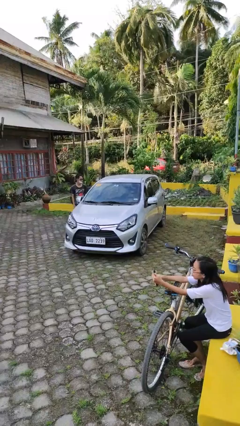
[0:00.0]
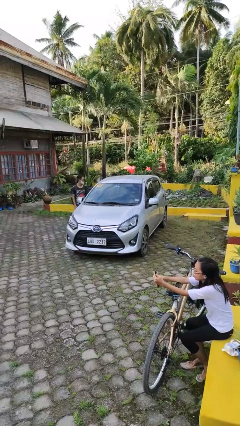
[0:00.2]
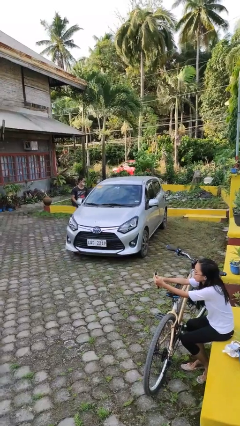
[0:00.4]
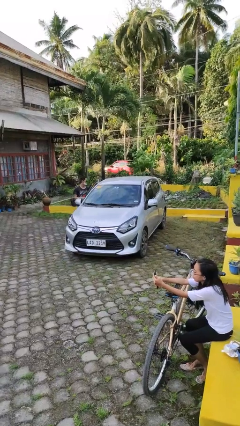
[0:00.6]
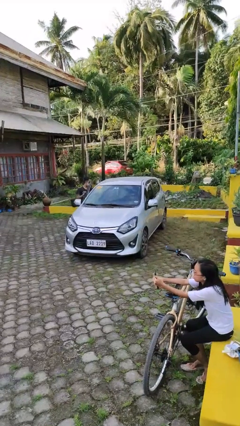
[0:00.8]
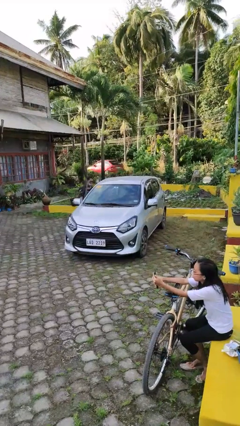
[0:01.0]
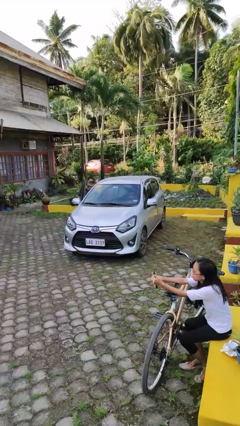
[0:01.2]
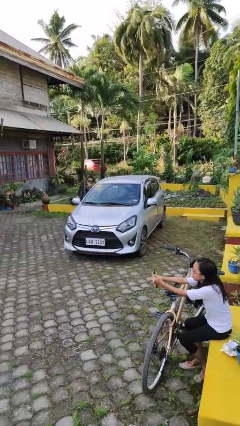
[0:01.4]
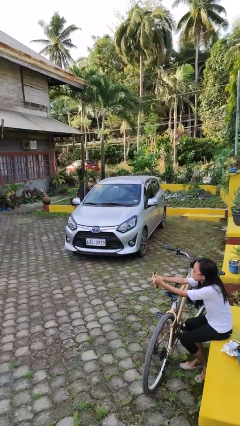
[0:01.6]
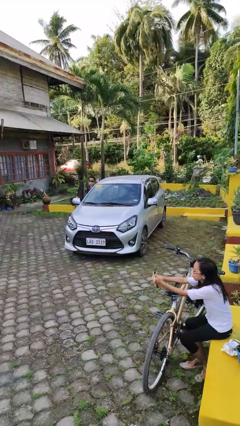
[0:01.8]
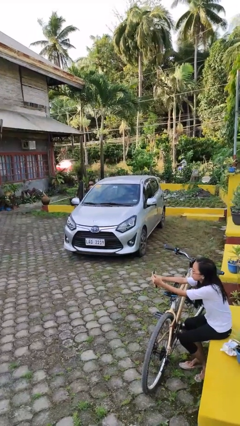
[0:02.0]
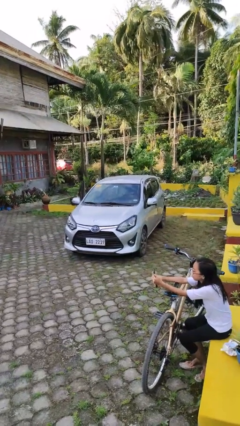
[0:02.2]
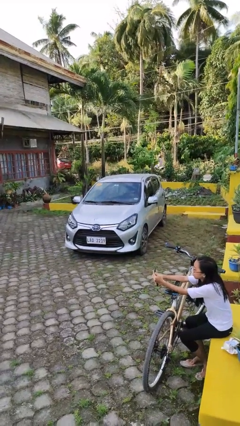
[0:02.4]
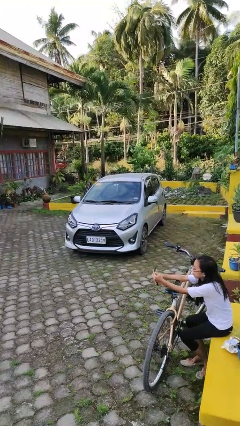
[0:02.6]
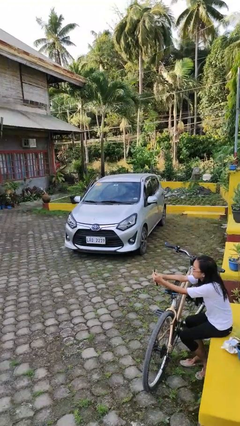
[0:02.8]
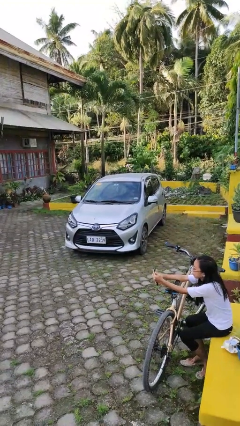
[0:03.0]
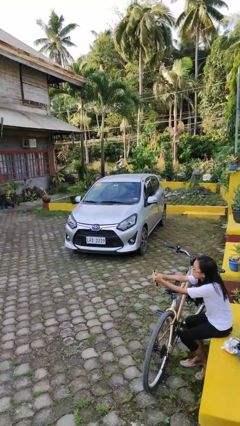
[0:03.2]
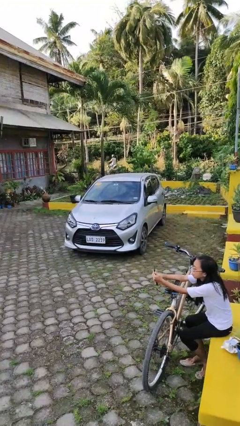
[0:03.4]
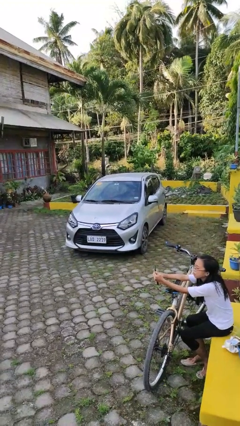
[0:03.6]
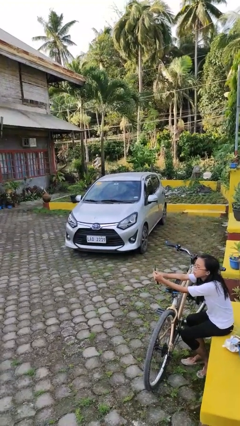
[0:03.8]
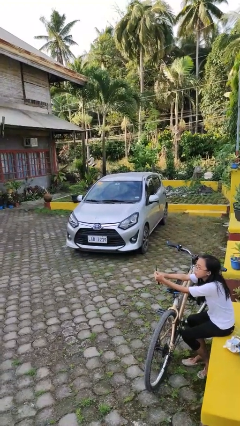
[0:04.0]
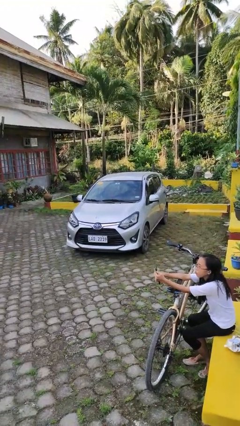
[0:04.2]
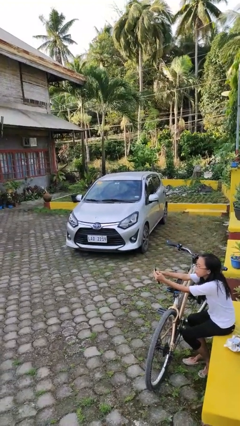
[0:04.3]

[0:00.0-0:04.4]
car picks up person

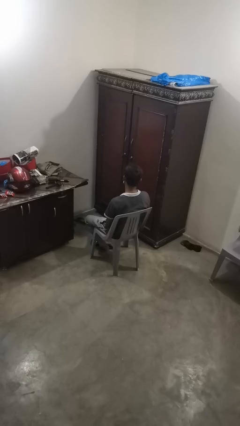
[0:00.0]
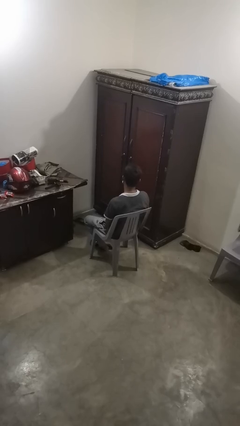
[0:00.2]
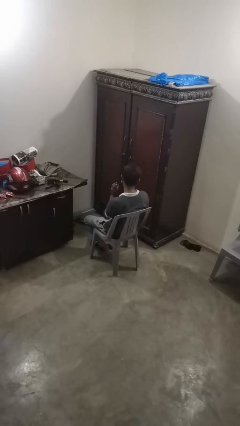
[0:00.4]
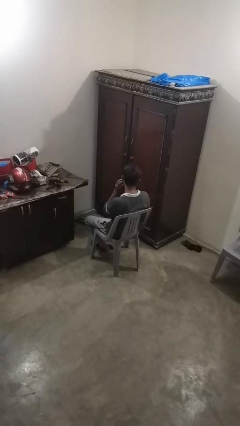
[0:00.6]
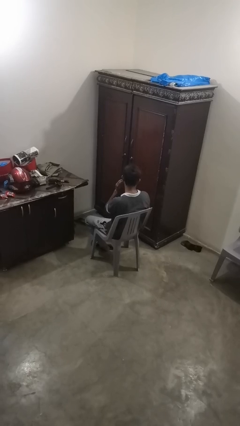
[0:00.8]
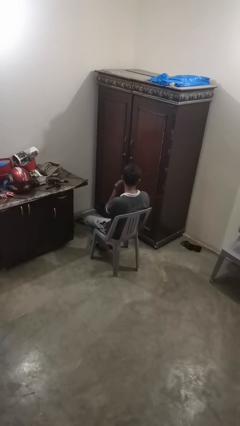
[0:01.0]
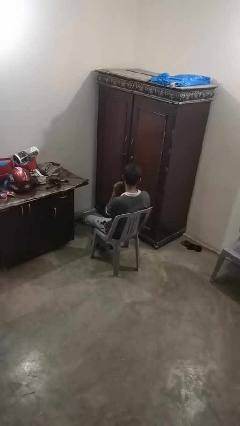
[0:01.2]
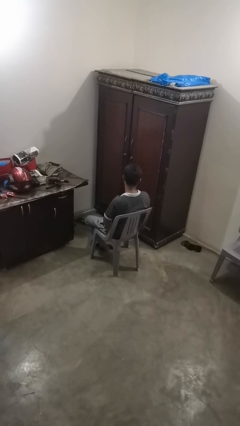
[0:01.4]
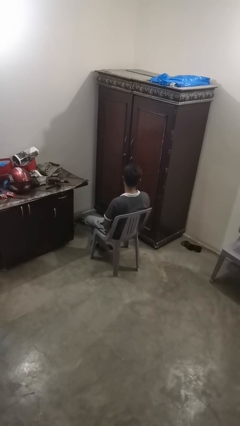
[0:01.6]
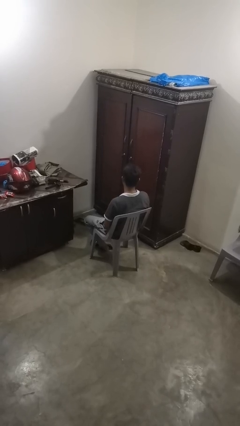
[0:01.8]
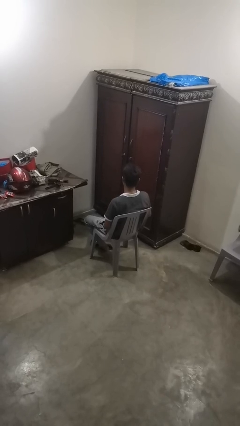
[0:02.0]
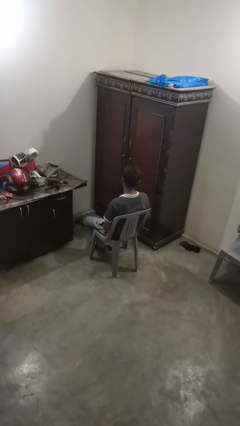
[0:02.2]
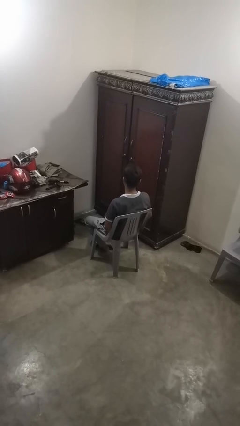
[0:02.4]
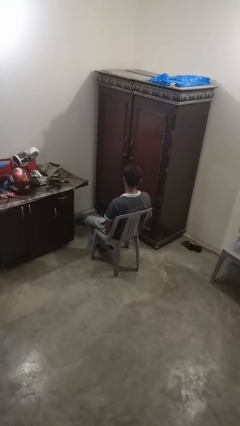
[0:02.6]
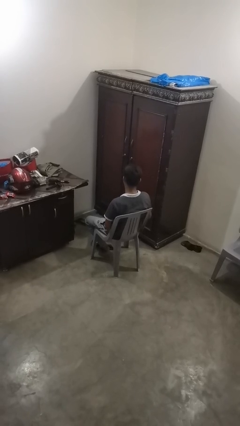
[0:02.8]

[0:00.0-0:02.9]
person takes off earrings

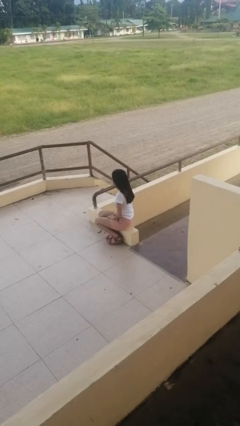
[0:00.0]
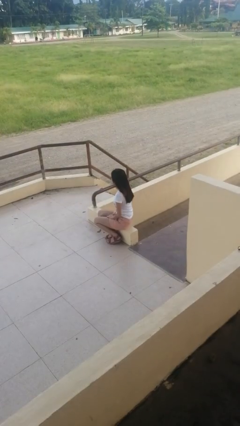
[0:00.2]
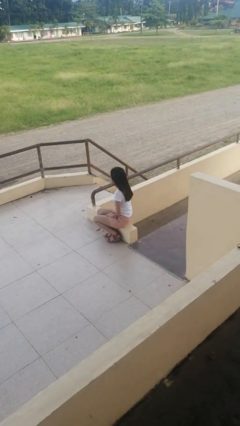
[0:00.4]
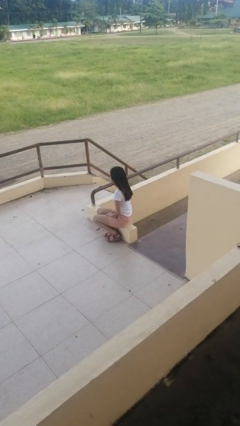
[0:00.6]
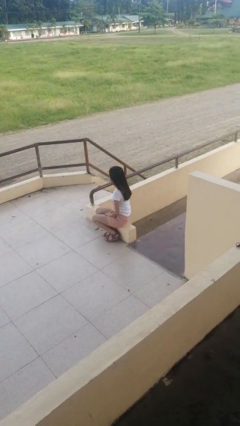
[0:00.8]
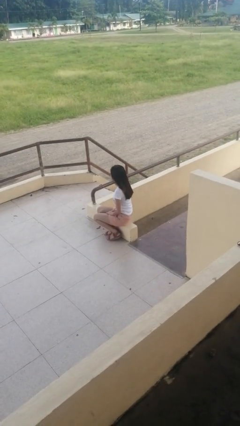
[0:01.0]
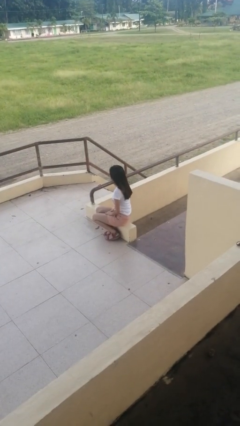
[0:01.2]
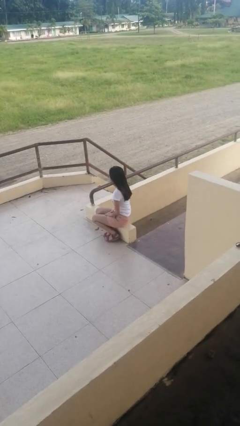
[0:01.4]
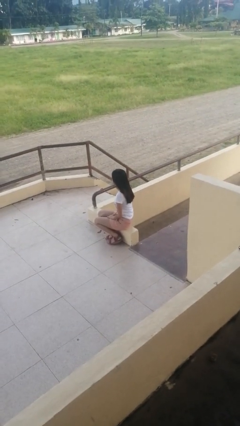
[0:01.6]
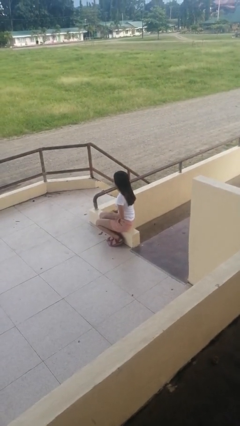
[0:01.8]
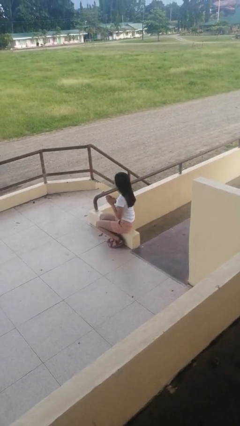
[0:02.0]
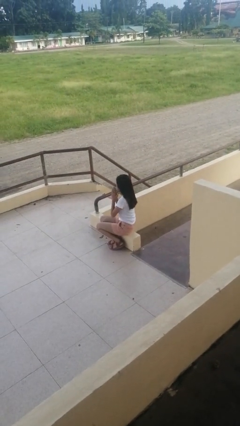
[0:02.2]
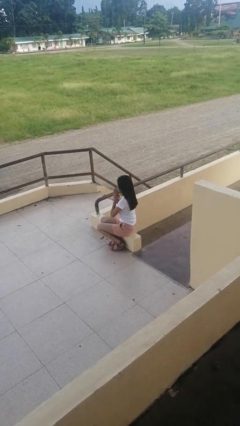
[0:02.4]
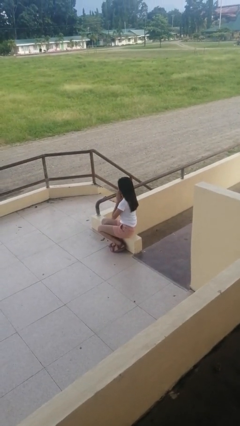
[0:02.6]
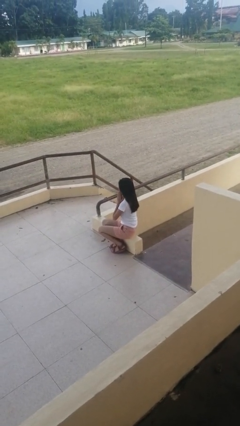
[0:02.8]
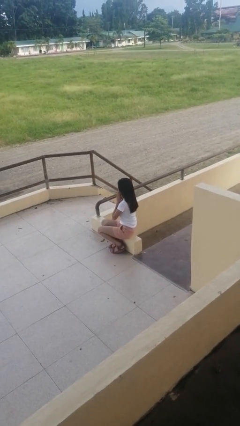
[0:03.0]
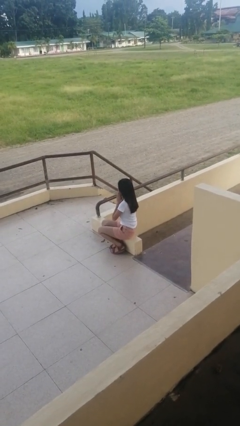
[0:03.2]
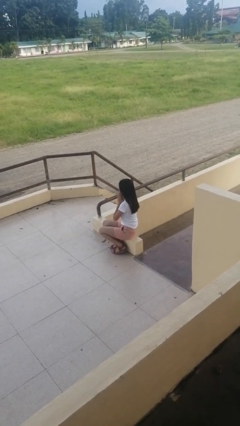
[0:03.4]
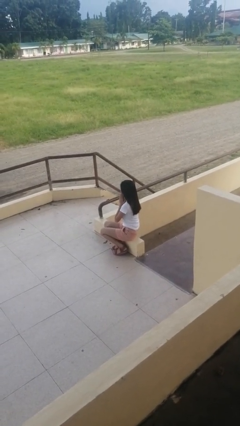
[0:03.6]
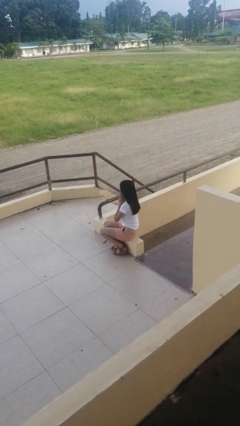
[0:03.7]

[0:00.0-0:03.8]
person prays

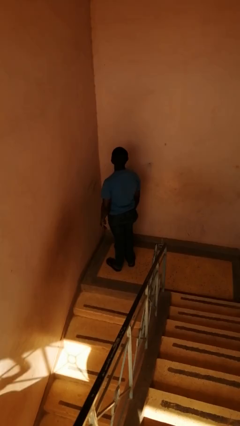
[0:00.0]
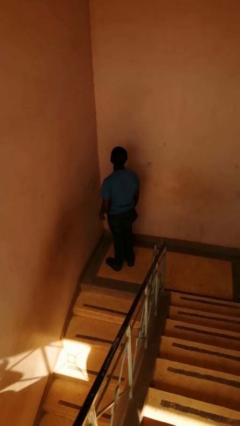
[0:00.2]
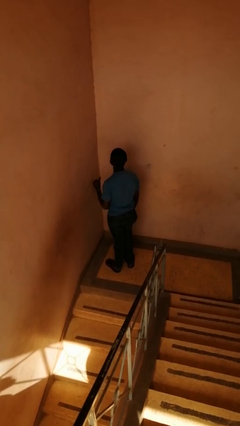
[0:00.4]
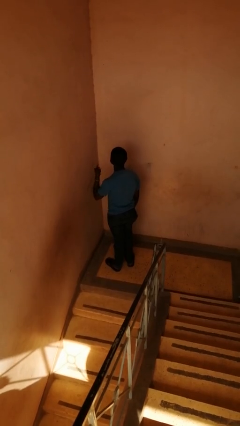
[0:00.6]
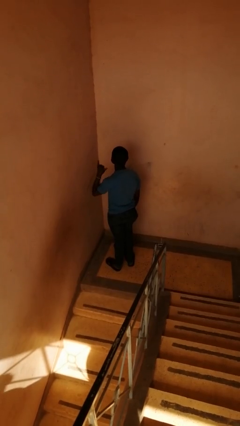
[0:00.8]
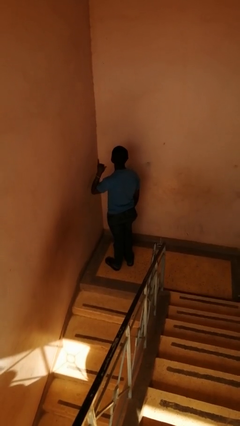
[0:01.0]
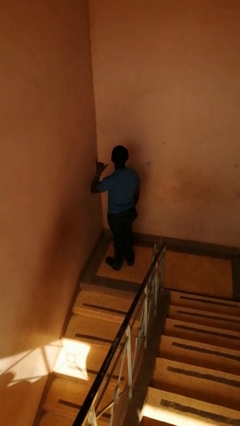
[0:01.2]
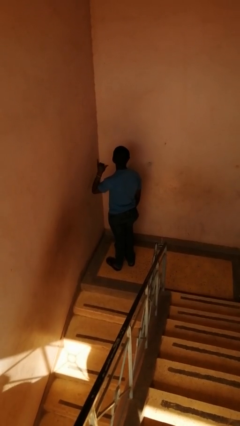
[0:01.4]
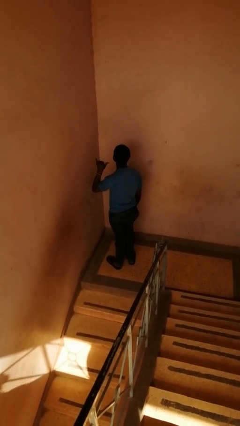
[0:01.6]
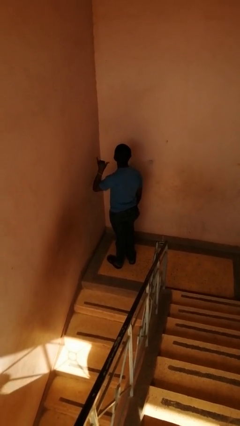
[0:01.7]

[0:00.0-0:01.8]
person gestures hang loose

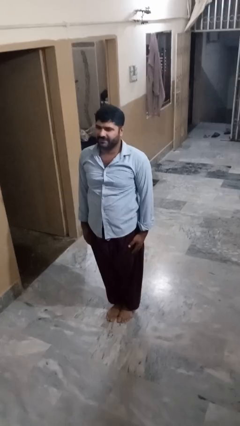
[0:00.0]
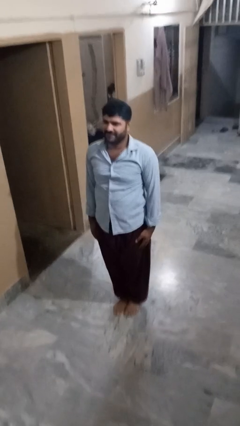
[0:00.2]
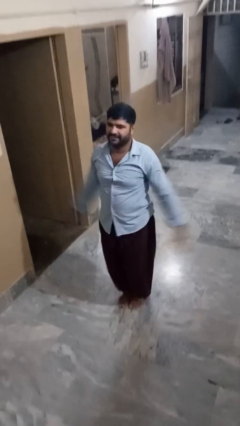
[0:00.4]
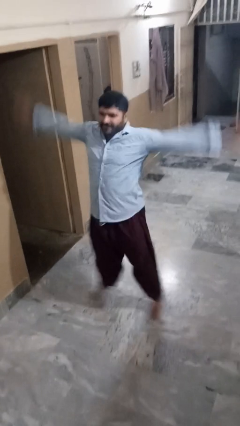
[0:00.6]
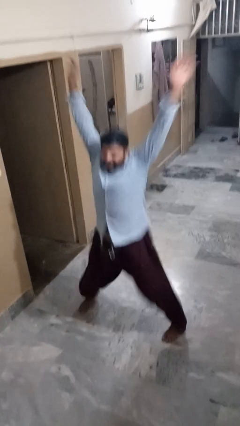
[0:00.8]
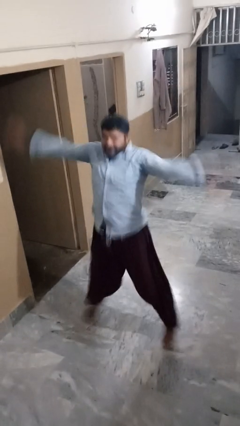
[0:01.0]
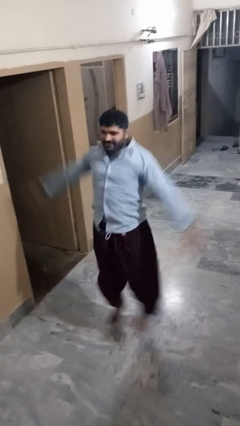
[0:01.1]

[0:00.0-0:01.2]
person exercises with jumping jacks

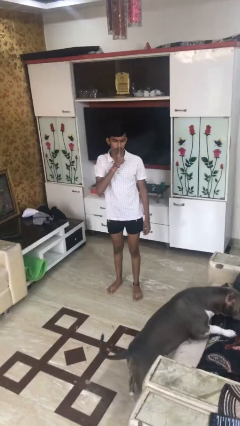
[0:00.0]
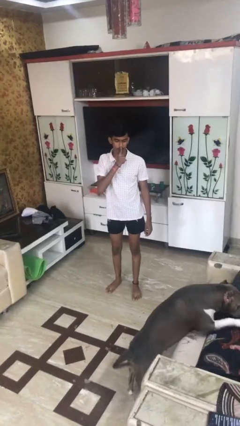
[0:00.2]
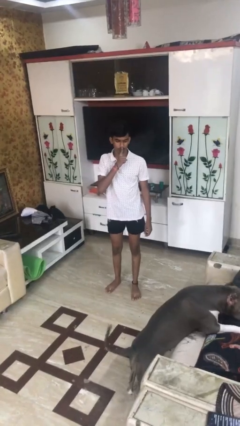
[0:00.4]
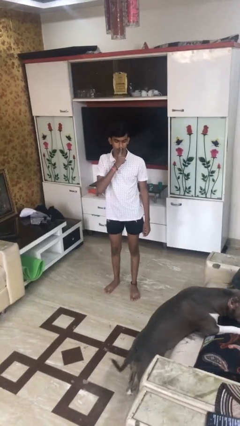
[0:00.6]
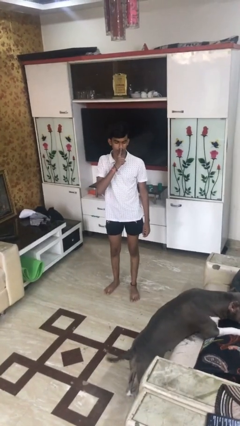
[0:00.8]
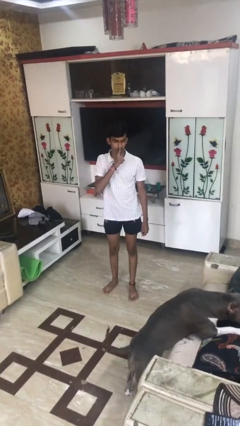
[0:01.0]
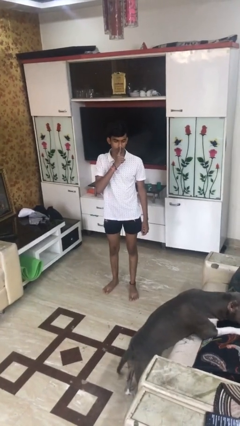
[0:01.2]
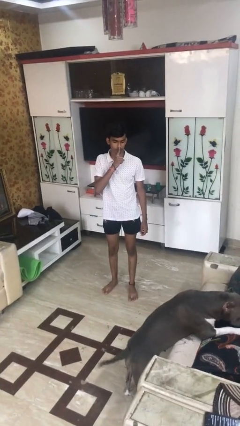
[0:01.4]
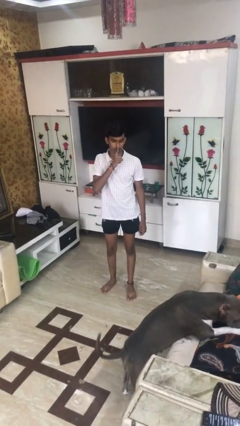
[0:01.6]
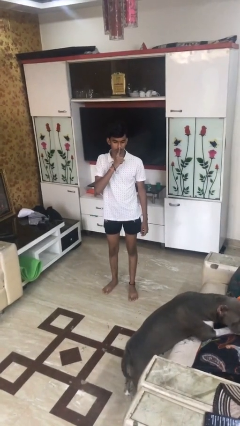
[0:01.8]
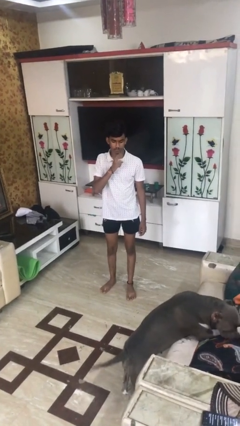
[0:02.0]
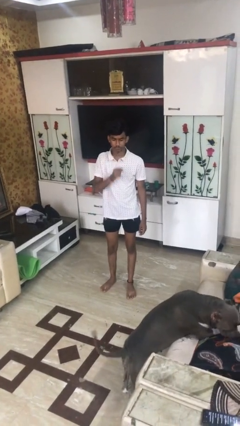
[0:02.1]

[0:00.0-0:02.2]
person gestures be quiet

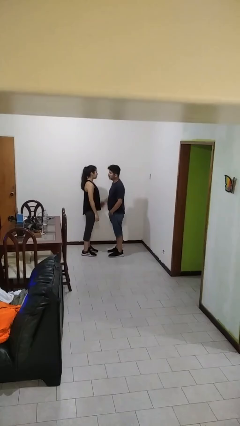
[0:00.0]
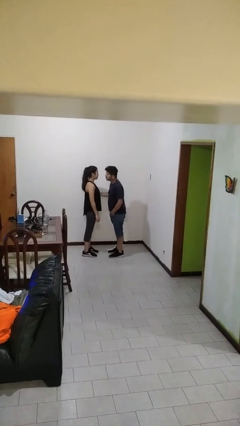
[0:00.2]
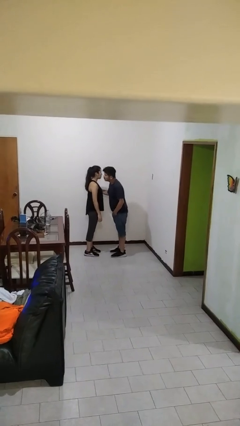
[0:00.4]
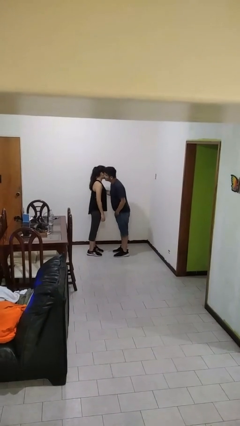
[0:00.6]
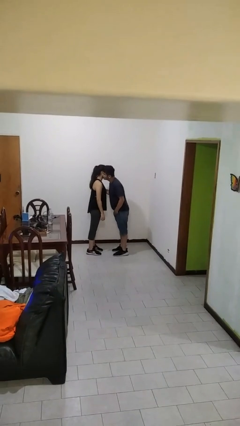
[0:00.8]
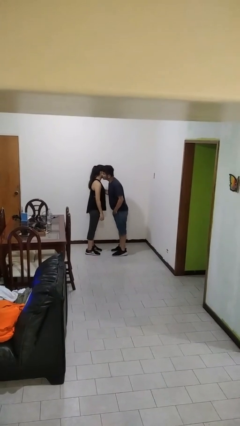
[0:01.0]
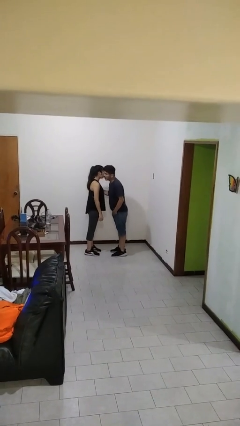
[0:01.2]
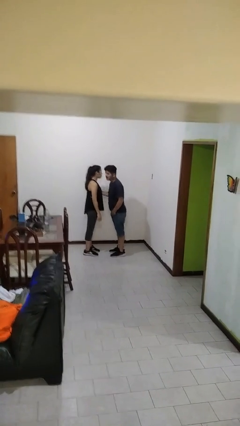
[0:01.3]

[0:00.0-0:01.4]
person kisses cheek of person
